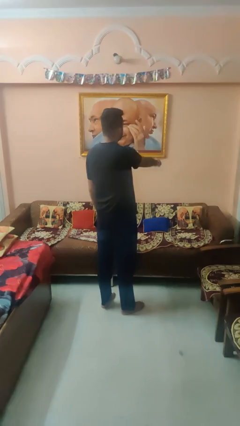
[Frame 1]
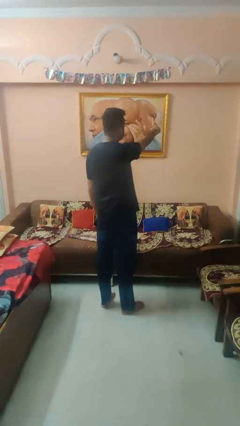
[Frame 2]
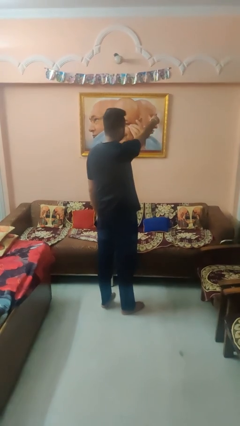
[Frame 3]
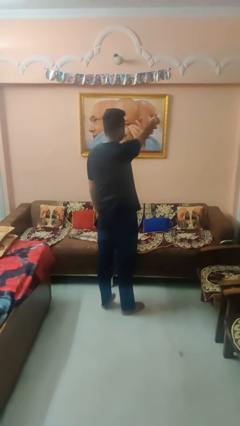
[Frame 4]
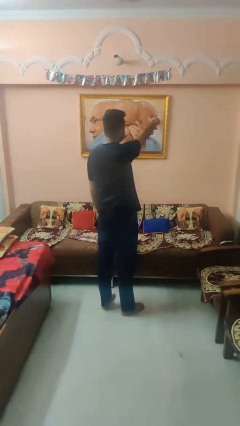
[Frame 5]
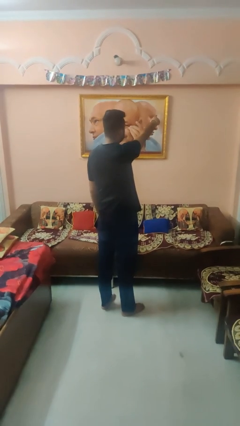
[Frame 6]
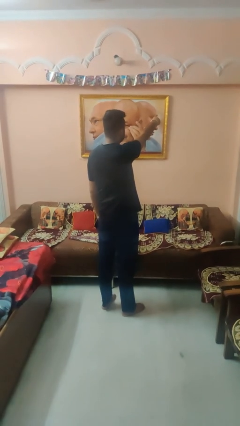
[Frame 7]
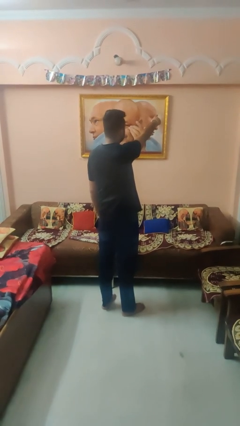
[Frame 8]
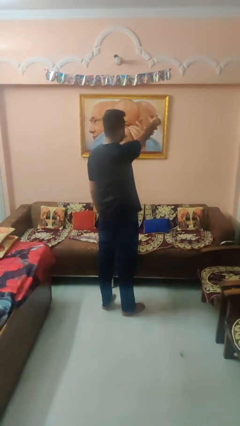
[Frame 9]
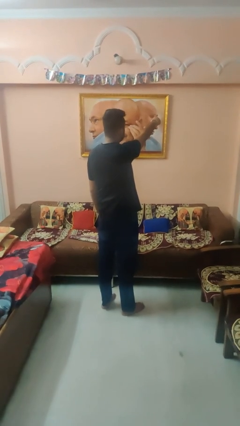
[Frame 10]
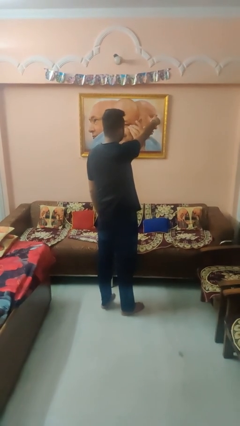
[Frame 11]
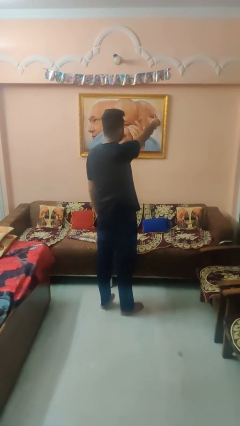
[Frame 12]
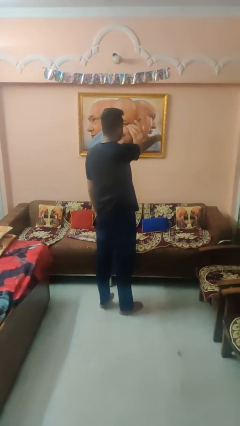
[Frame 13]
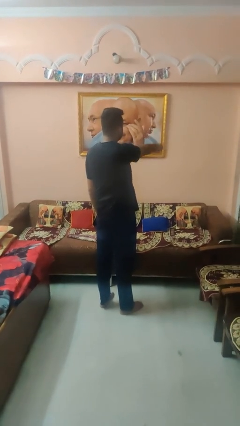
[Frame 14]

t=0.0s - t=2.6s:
person points at person

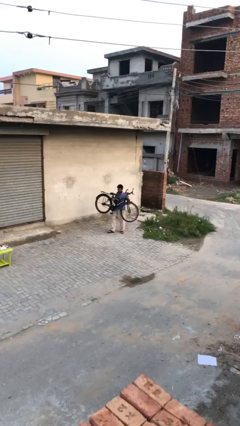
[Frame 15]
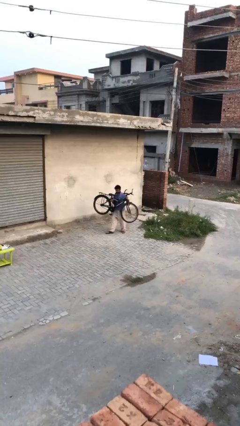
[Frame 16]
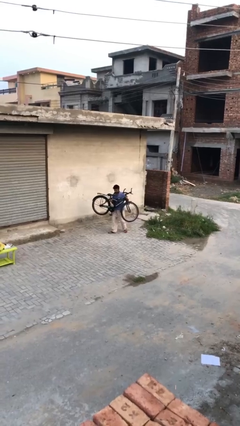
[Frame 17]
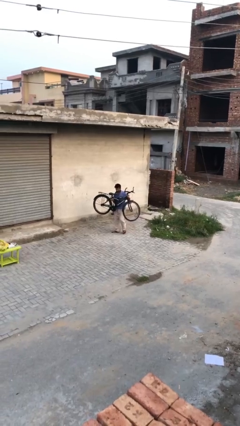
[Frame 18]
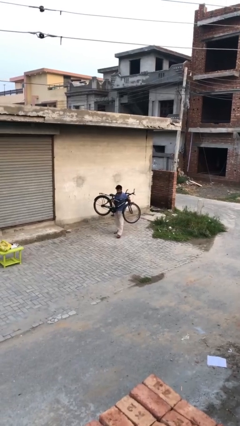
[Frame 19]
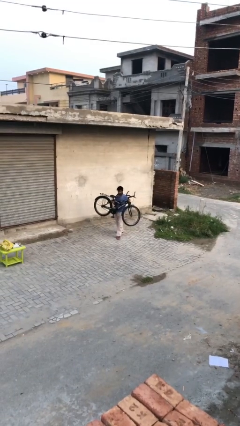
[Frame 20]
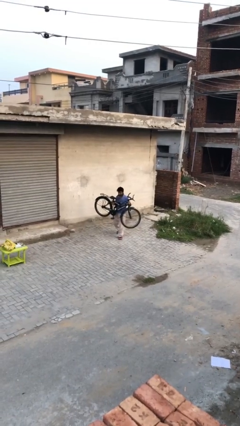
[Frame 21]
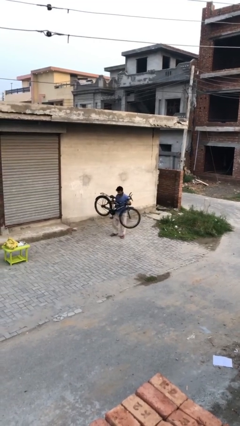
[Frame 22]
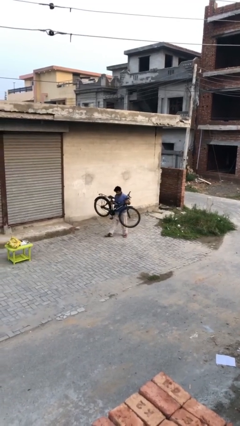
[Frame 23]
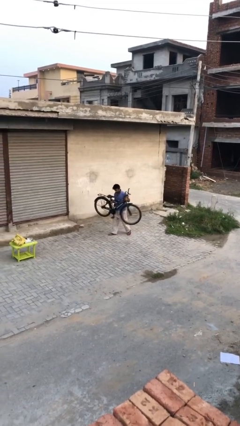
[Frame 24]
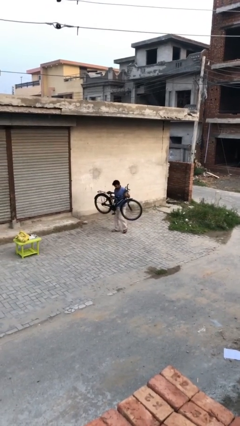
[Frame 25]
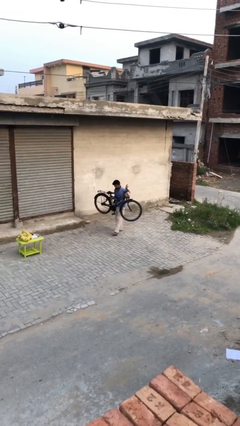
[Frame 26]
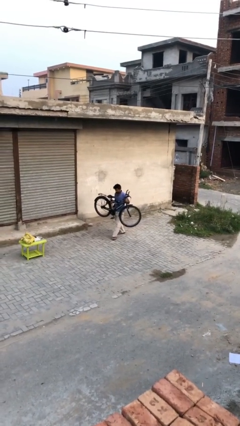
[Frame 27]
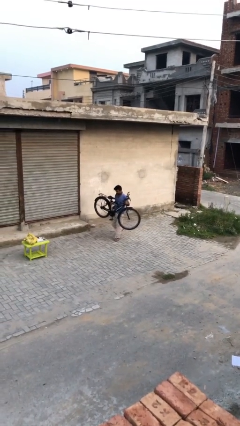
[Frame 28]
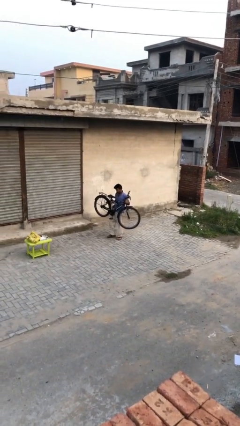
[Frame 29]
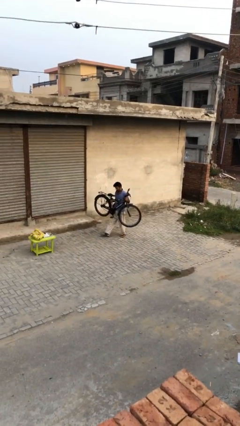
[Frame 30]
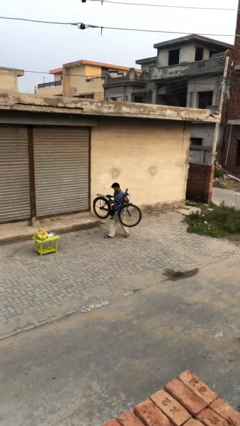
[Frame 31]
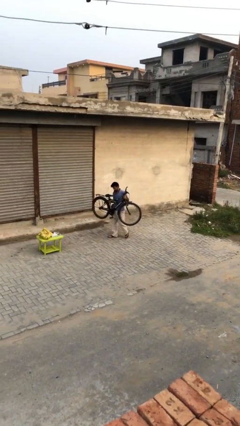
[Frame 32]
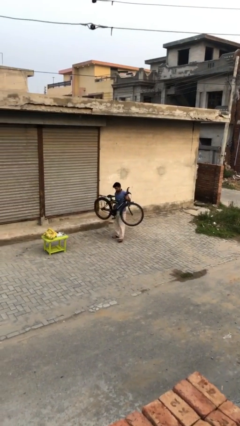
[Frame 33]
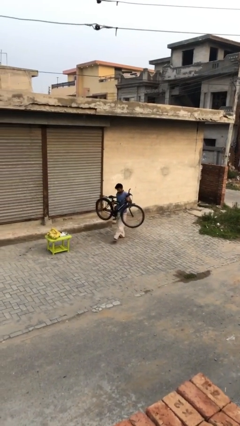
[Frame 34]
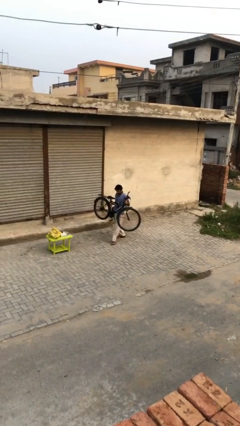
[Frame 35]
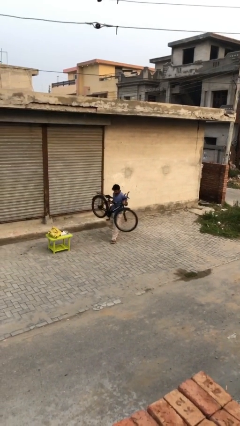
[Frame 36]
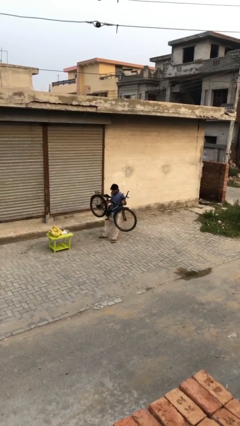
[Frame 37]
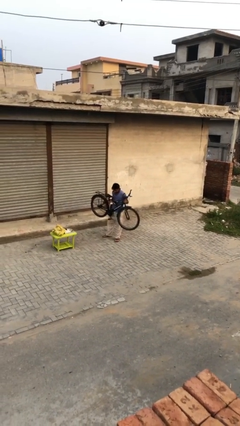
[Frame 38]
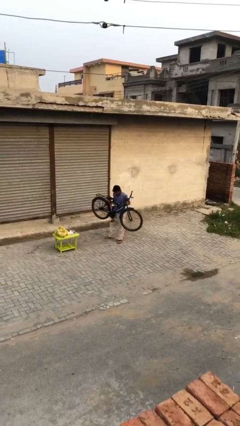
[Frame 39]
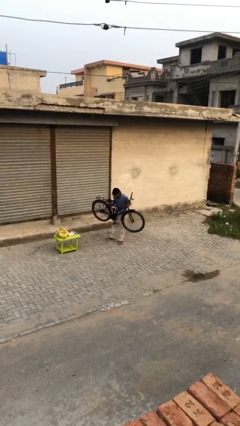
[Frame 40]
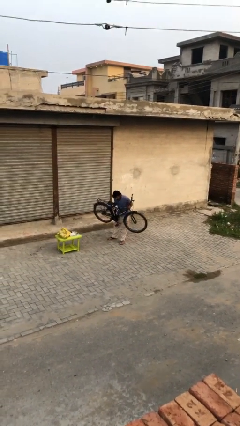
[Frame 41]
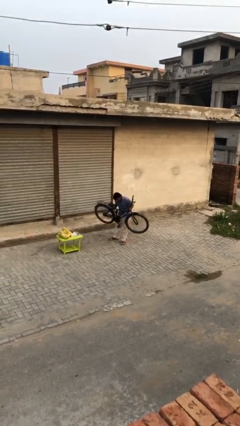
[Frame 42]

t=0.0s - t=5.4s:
person carries heavy object

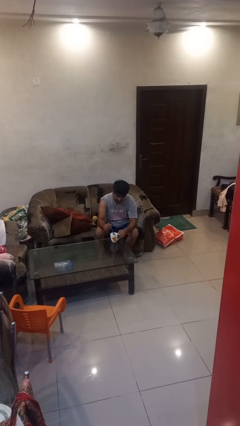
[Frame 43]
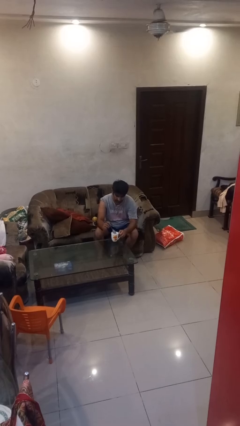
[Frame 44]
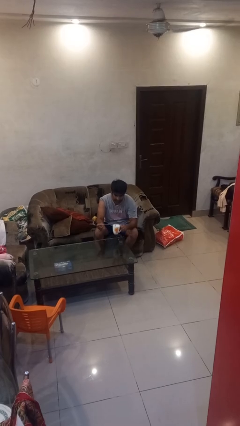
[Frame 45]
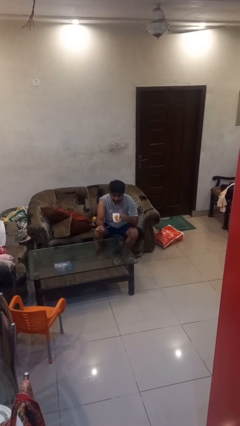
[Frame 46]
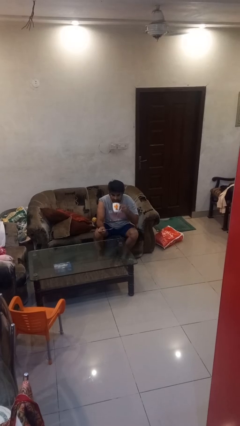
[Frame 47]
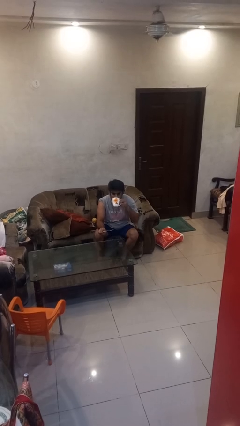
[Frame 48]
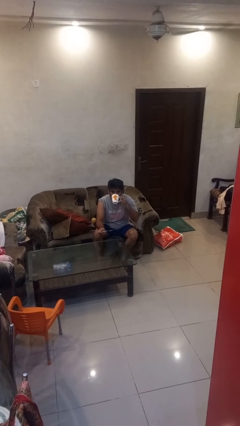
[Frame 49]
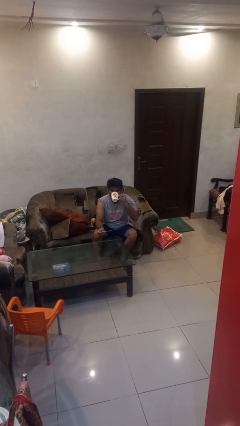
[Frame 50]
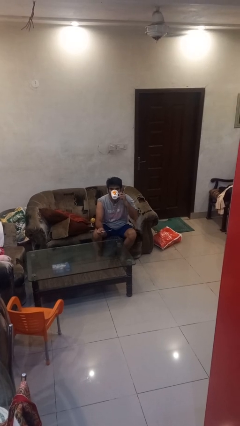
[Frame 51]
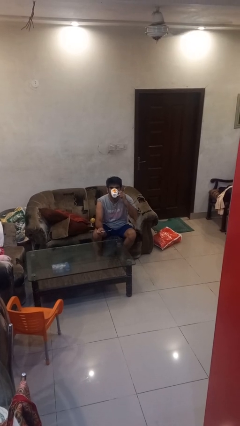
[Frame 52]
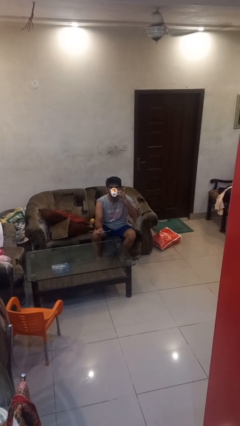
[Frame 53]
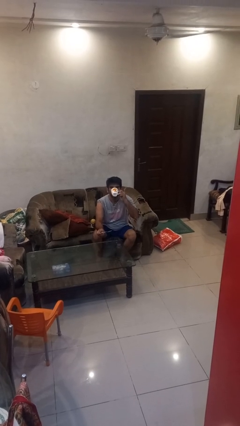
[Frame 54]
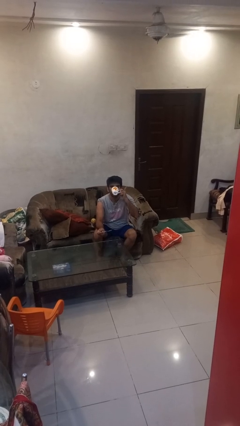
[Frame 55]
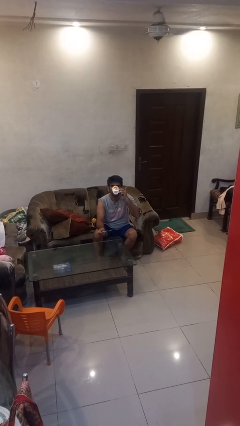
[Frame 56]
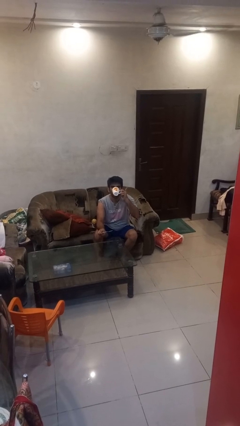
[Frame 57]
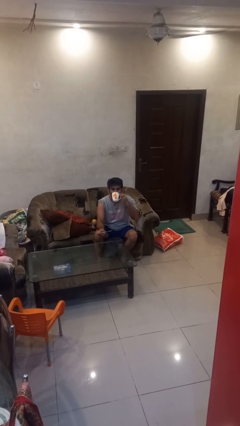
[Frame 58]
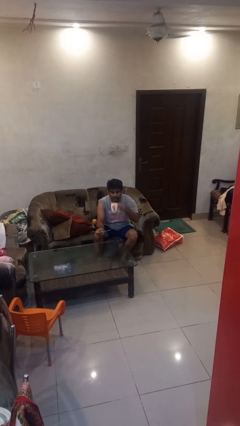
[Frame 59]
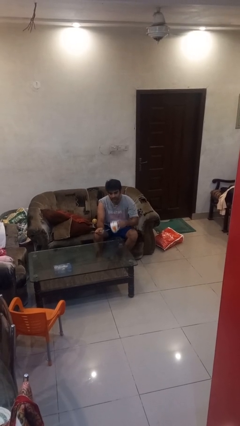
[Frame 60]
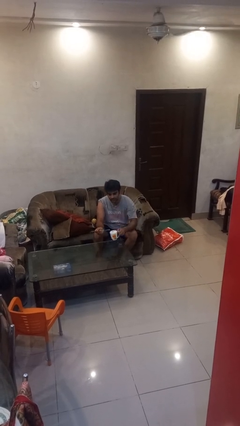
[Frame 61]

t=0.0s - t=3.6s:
person drinks from mug

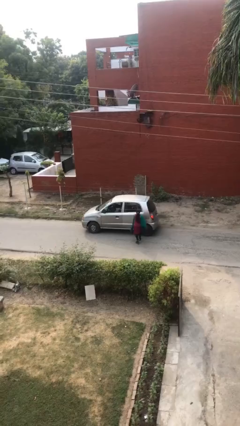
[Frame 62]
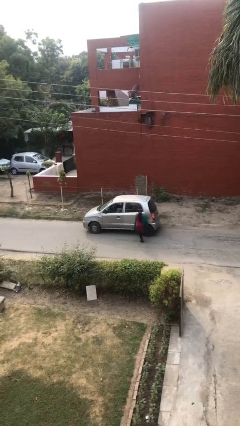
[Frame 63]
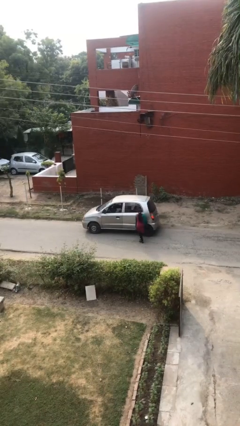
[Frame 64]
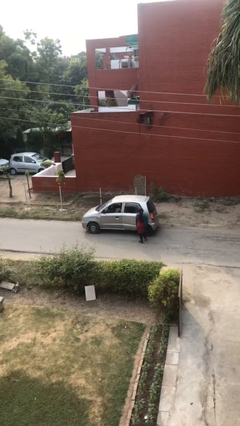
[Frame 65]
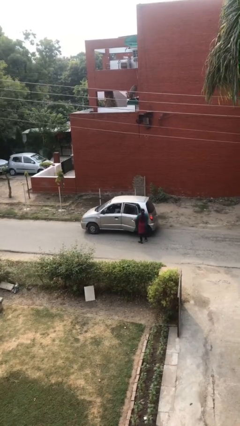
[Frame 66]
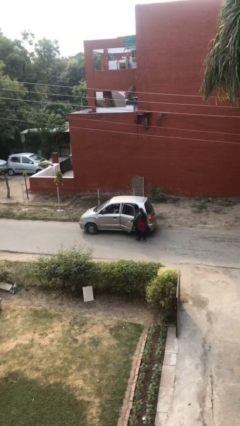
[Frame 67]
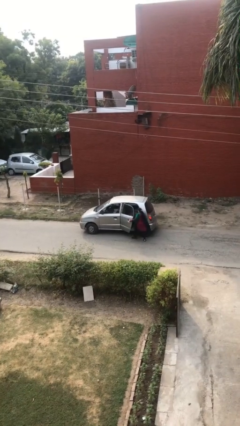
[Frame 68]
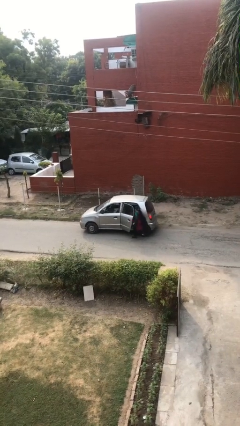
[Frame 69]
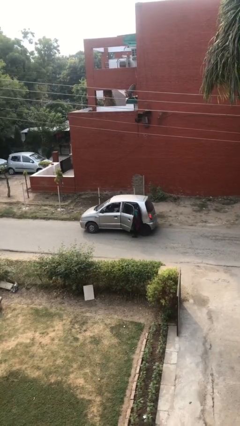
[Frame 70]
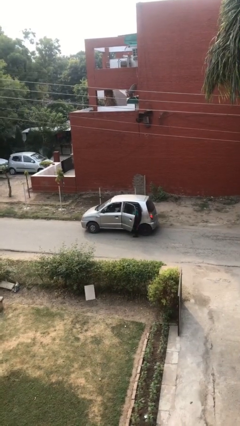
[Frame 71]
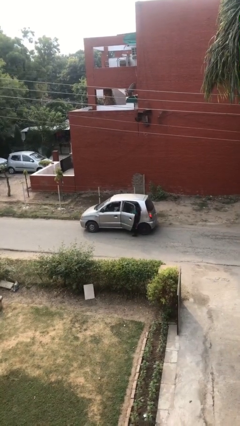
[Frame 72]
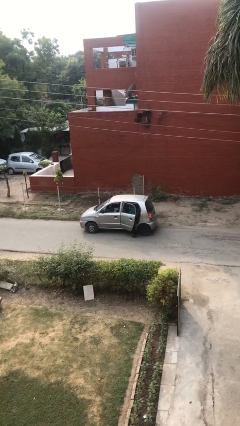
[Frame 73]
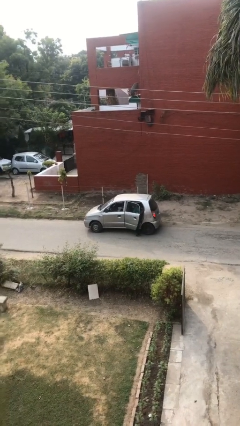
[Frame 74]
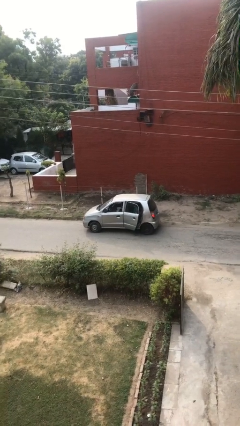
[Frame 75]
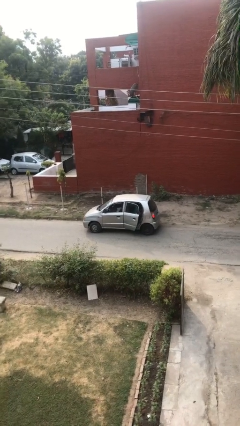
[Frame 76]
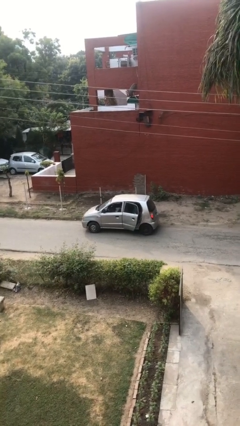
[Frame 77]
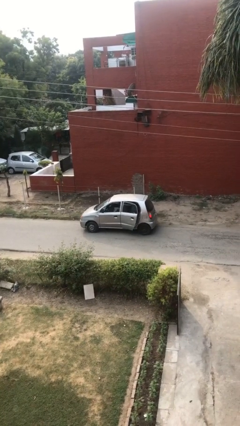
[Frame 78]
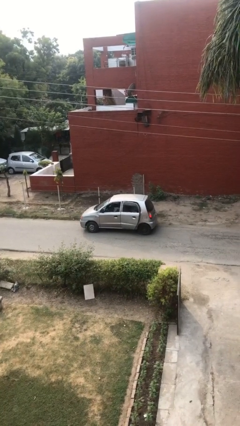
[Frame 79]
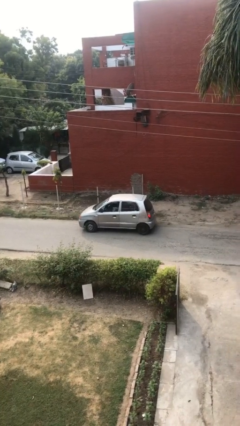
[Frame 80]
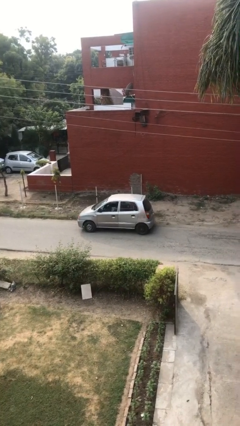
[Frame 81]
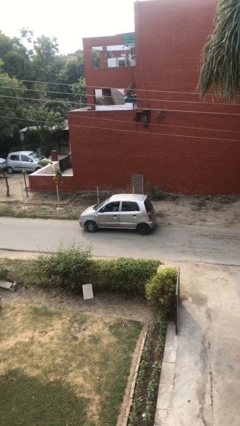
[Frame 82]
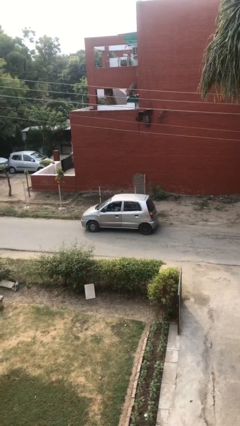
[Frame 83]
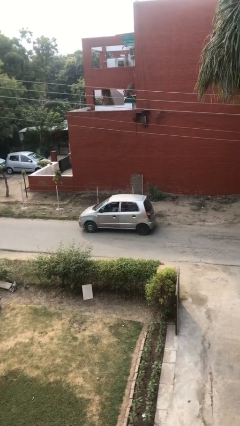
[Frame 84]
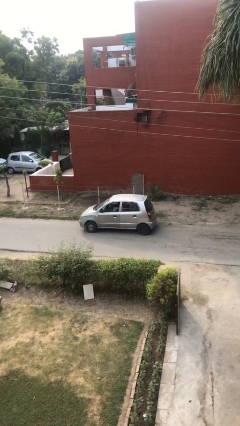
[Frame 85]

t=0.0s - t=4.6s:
car picks up person

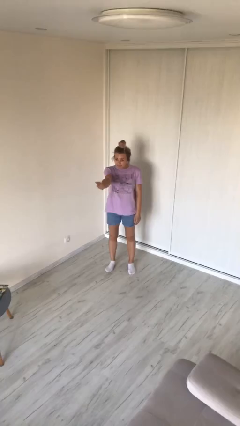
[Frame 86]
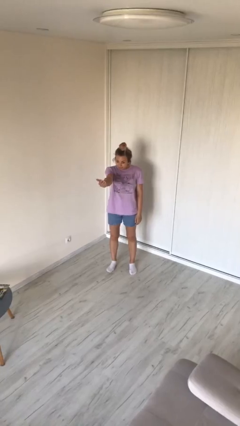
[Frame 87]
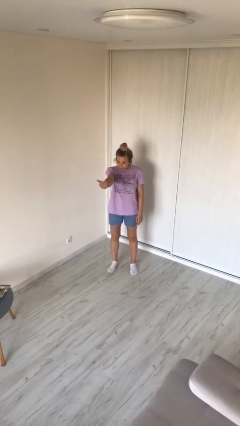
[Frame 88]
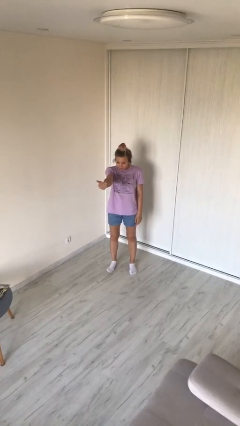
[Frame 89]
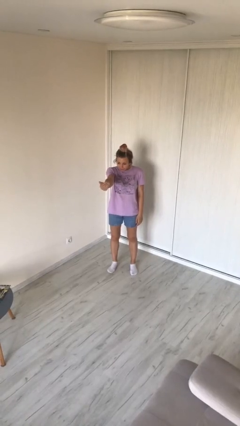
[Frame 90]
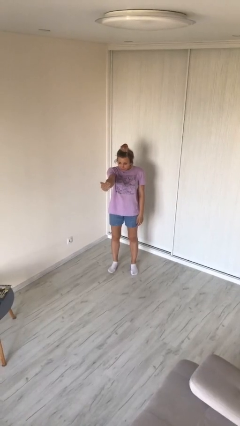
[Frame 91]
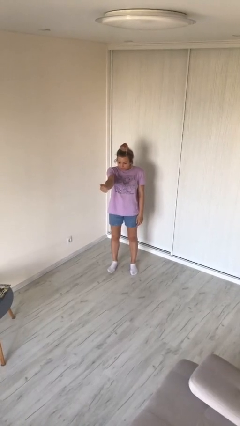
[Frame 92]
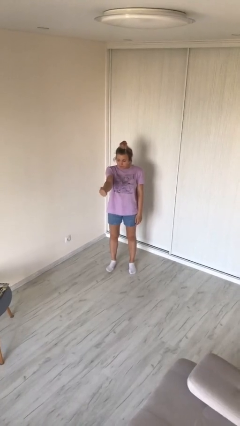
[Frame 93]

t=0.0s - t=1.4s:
person gestures come here
